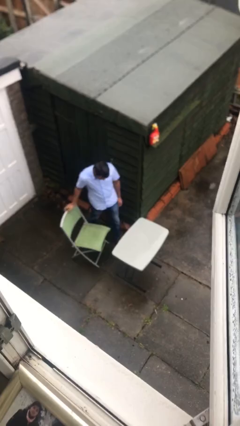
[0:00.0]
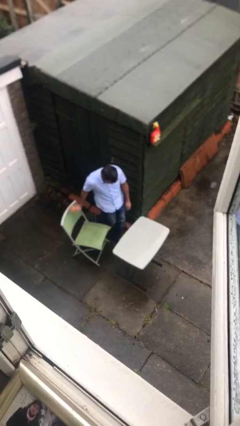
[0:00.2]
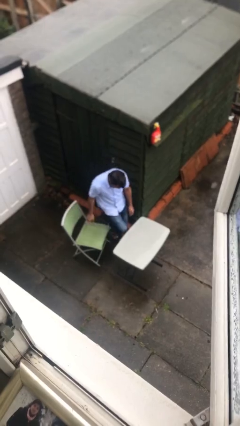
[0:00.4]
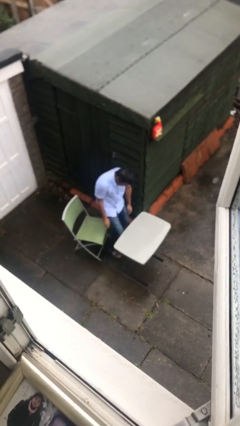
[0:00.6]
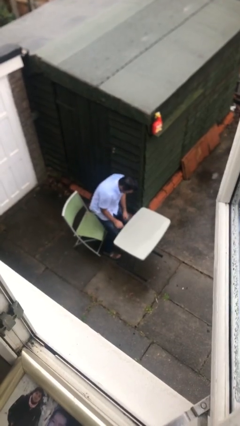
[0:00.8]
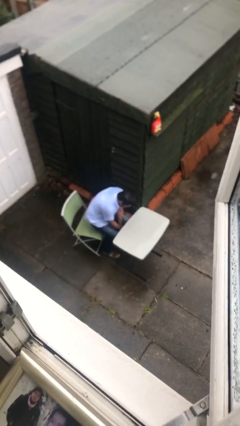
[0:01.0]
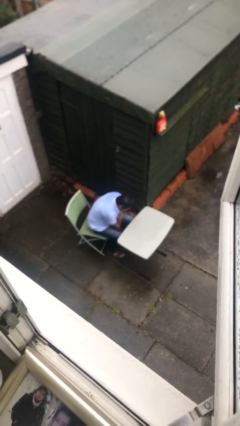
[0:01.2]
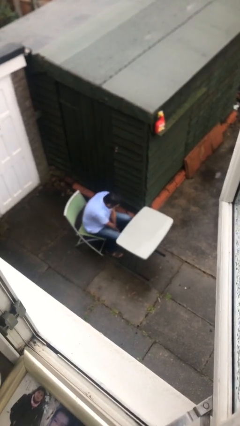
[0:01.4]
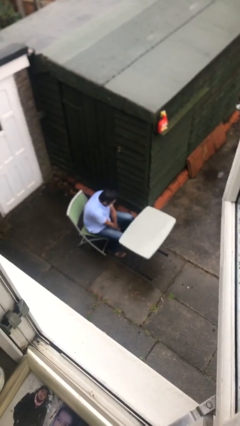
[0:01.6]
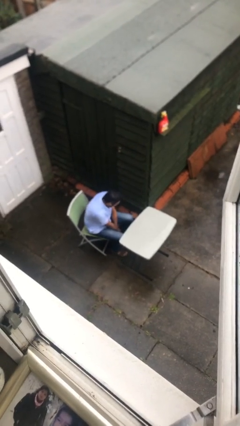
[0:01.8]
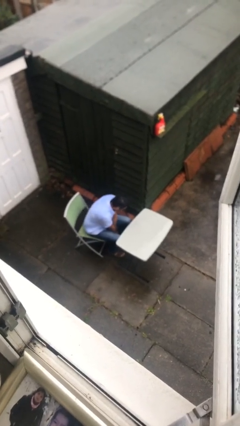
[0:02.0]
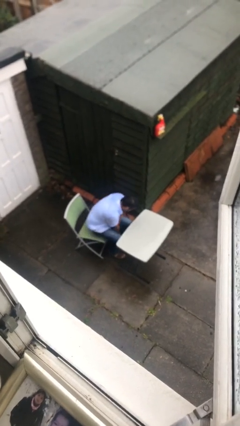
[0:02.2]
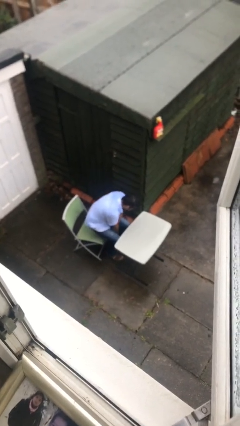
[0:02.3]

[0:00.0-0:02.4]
person sits down

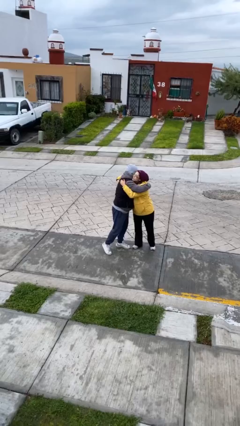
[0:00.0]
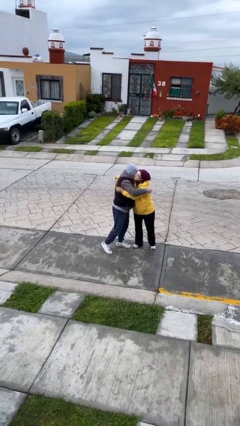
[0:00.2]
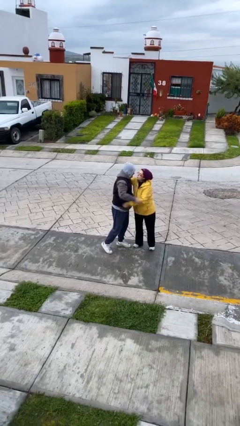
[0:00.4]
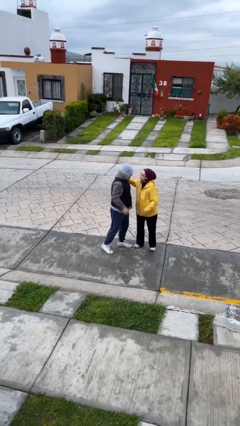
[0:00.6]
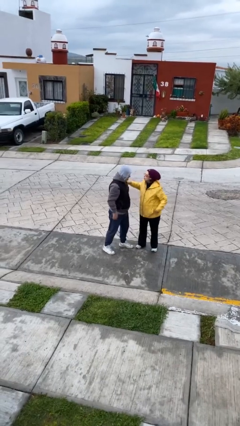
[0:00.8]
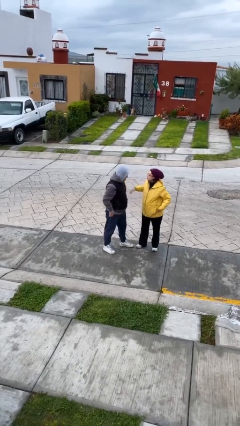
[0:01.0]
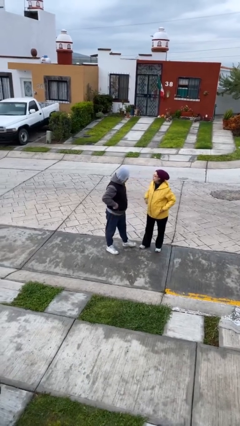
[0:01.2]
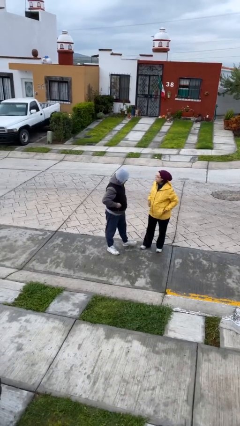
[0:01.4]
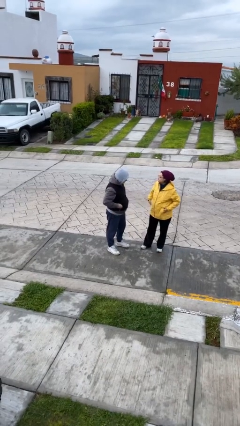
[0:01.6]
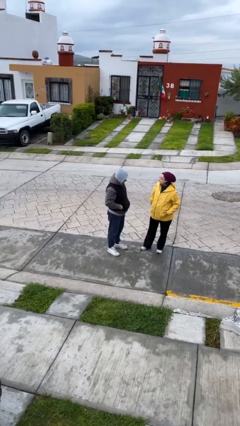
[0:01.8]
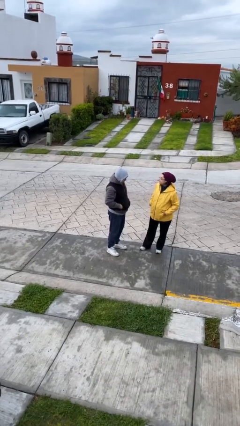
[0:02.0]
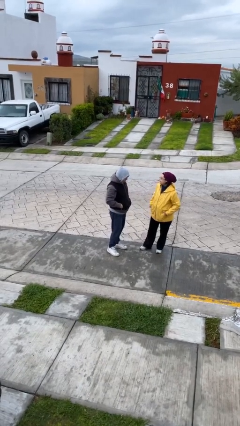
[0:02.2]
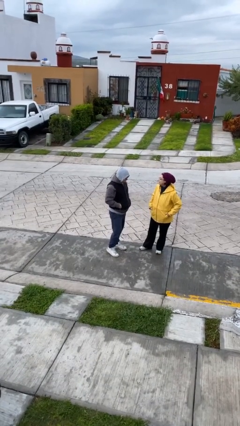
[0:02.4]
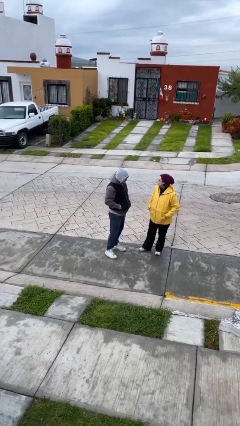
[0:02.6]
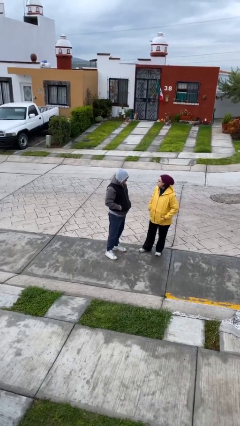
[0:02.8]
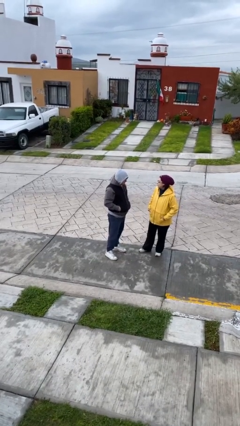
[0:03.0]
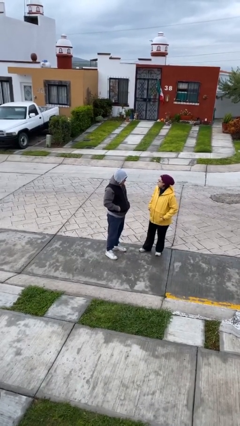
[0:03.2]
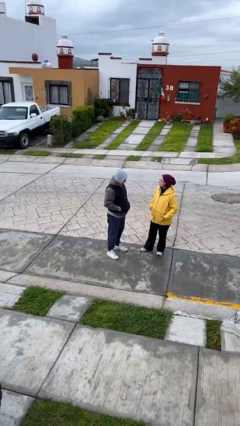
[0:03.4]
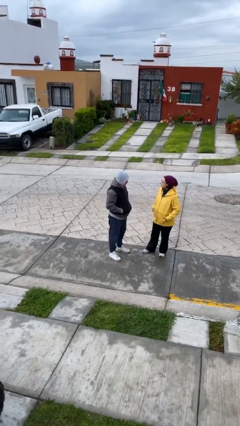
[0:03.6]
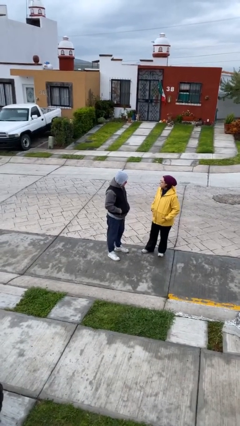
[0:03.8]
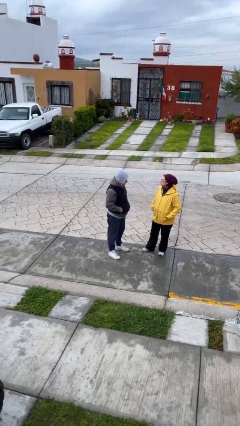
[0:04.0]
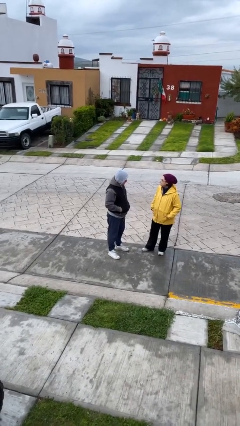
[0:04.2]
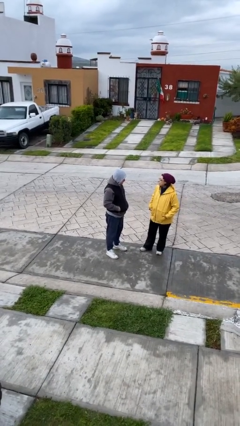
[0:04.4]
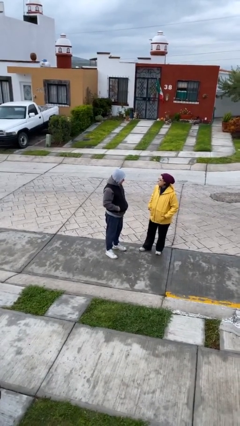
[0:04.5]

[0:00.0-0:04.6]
person talks to person

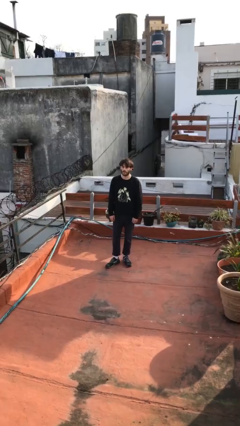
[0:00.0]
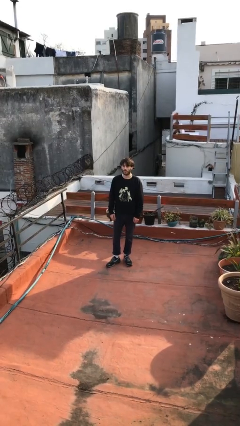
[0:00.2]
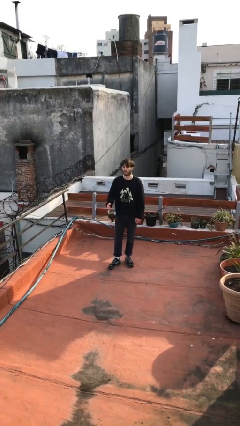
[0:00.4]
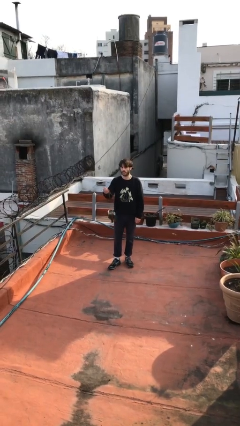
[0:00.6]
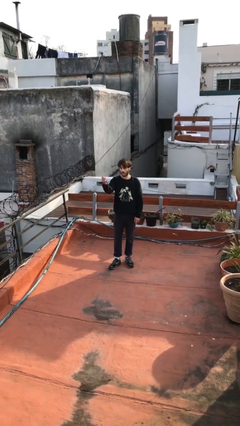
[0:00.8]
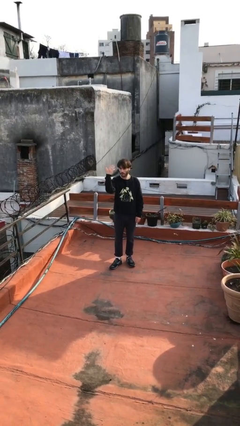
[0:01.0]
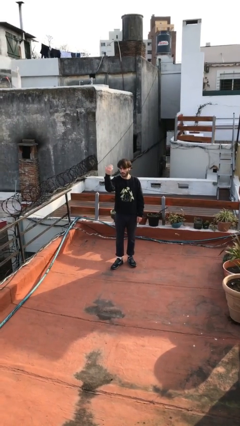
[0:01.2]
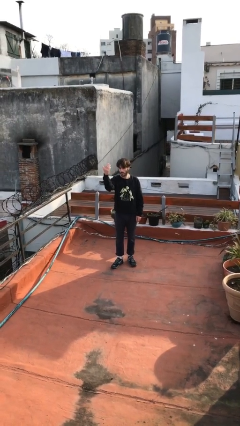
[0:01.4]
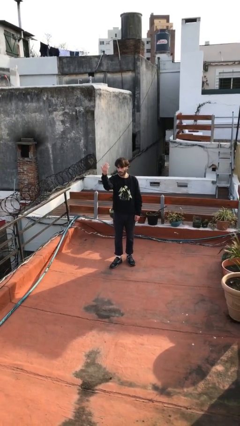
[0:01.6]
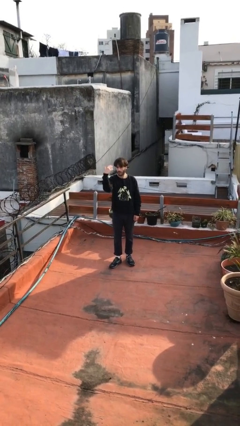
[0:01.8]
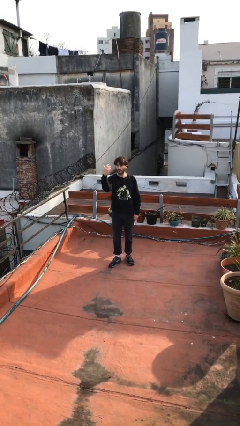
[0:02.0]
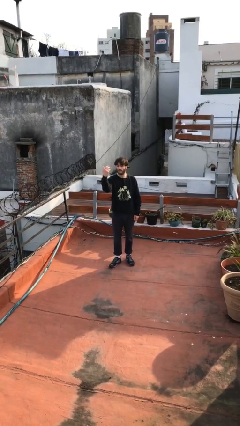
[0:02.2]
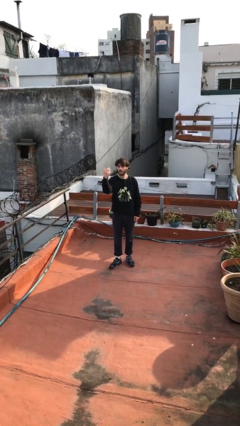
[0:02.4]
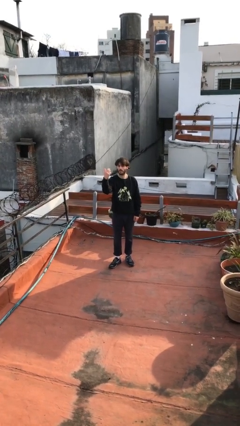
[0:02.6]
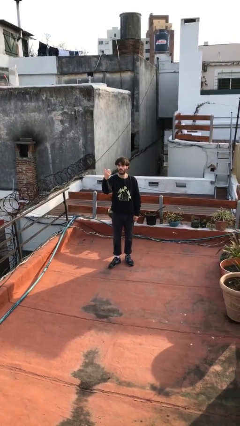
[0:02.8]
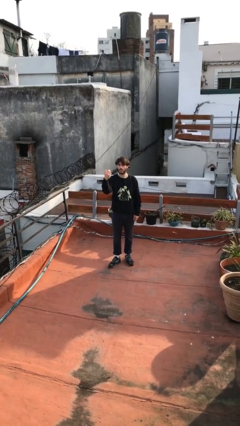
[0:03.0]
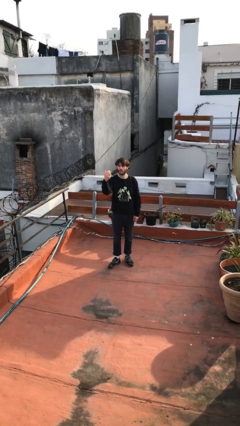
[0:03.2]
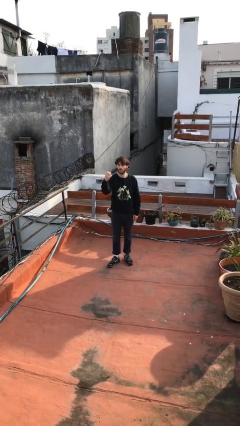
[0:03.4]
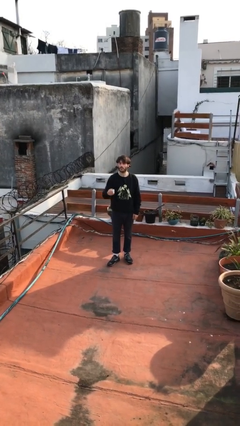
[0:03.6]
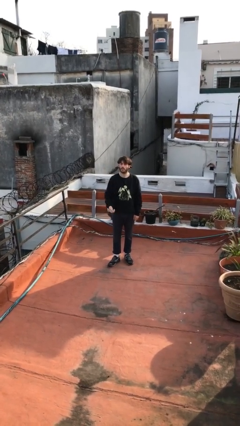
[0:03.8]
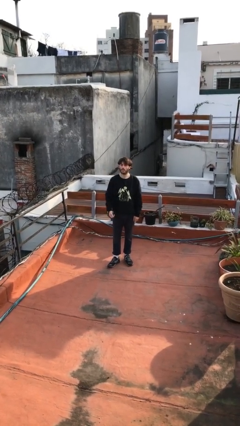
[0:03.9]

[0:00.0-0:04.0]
person gestures come here

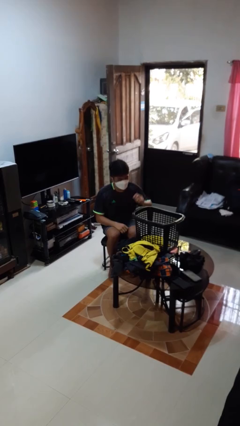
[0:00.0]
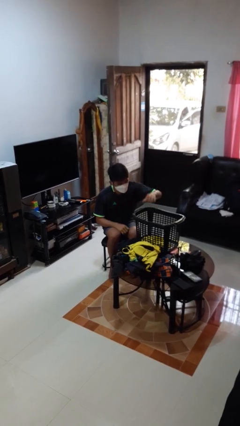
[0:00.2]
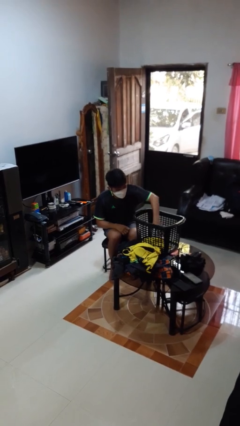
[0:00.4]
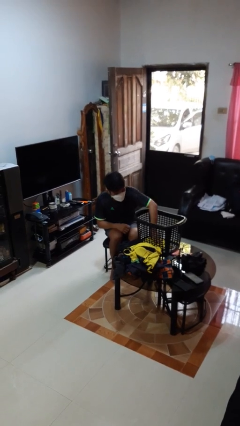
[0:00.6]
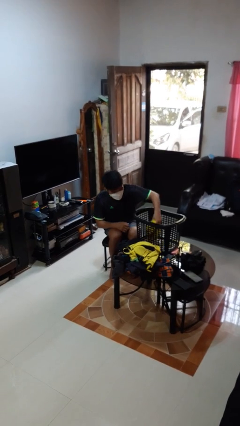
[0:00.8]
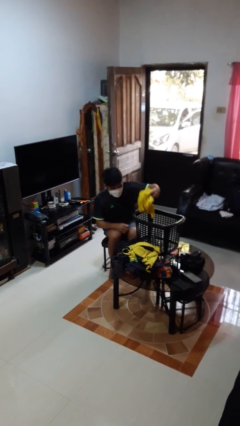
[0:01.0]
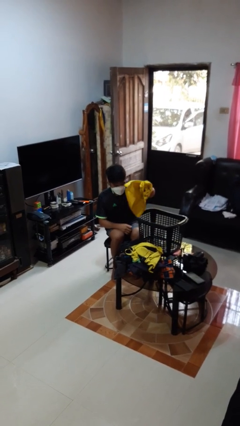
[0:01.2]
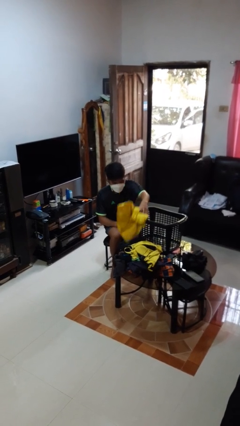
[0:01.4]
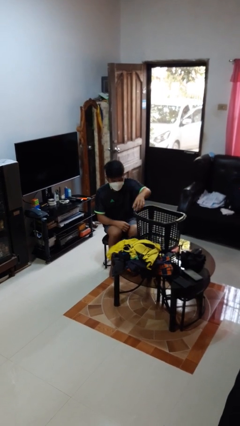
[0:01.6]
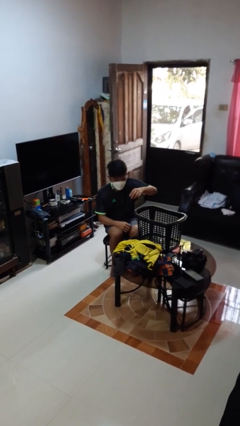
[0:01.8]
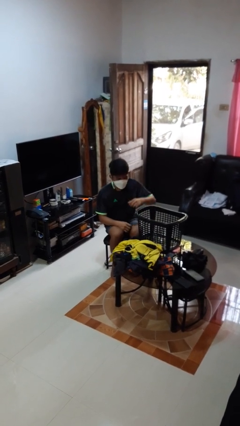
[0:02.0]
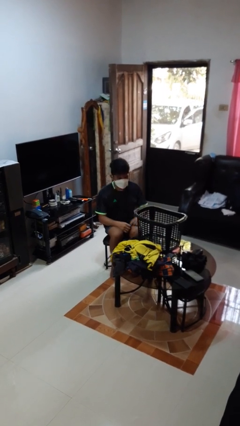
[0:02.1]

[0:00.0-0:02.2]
person takes object from basket

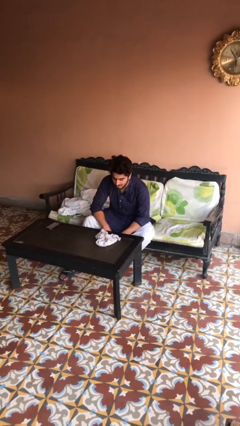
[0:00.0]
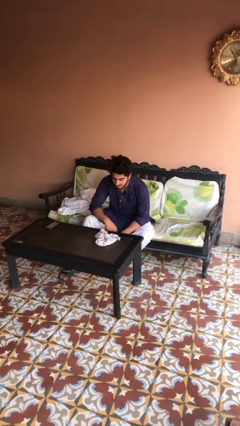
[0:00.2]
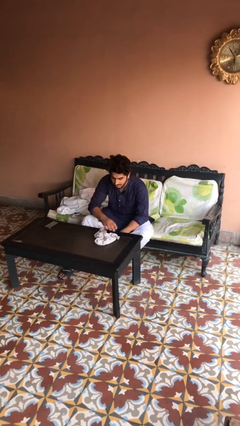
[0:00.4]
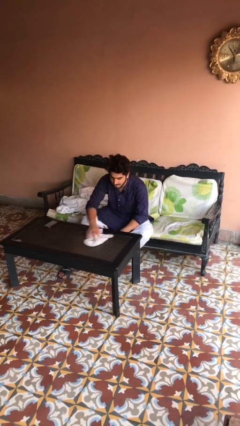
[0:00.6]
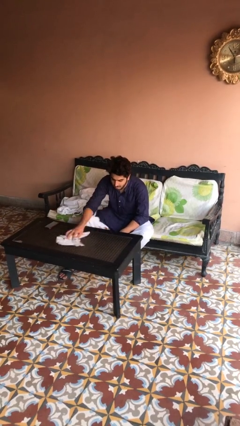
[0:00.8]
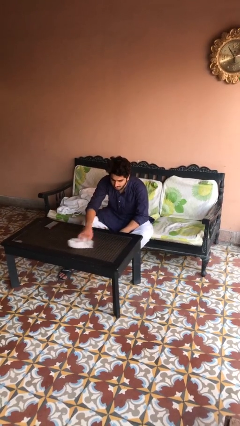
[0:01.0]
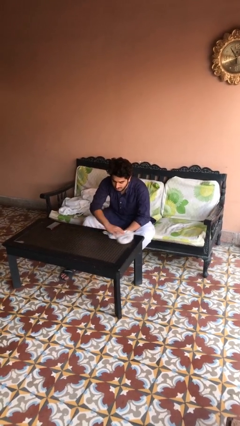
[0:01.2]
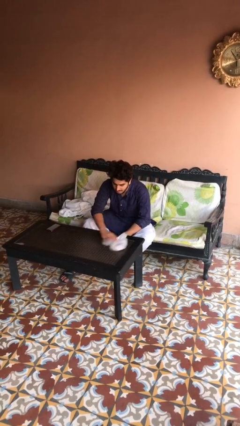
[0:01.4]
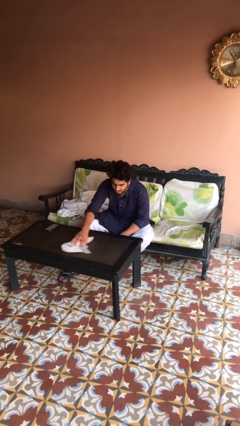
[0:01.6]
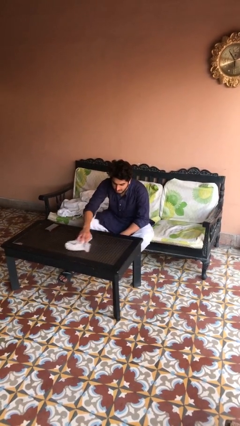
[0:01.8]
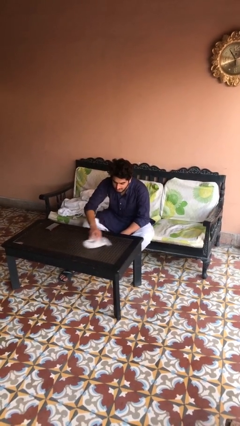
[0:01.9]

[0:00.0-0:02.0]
person cleans table with rag

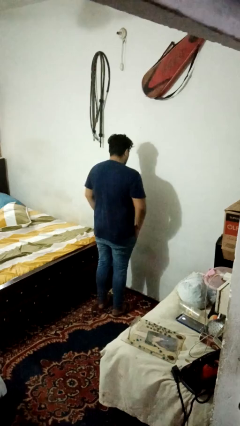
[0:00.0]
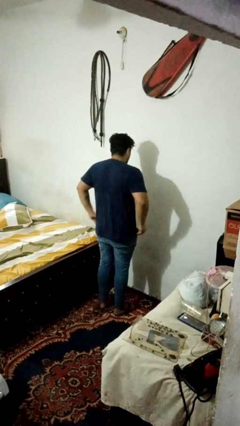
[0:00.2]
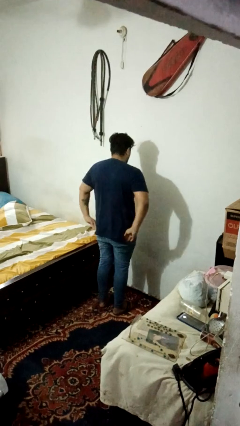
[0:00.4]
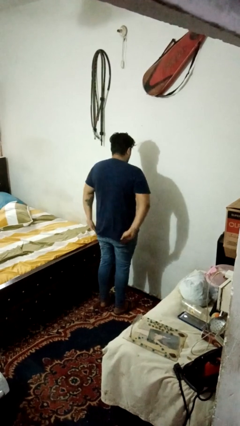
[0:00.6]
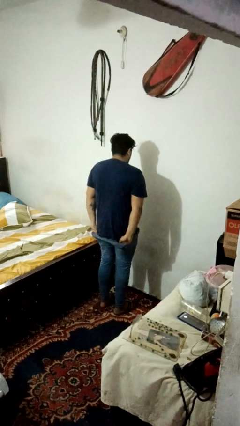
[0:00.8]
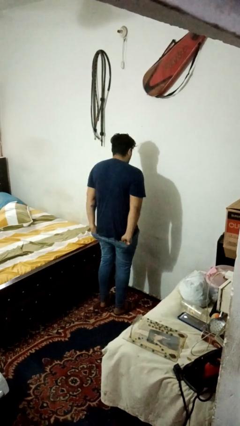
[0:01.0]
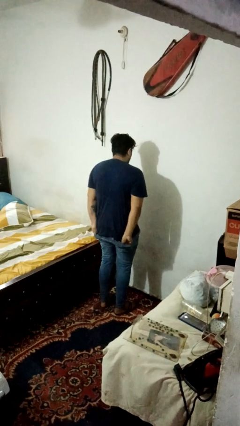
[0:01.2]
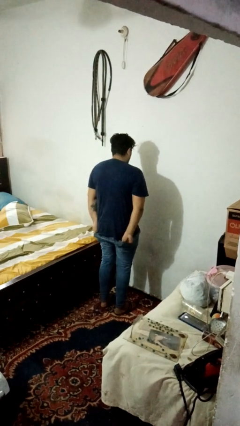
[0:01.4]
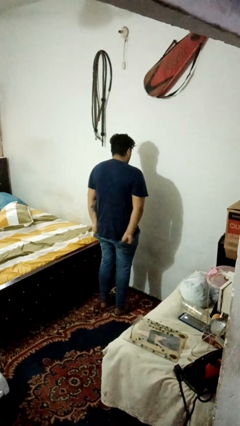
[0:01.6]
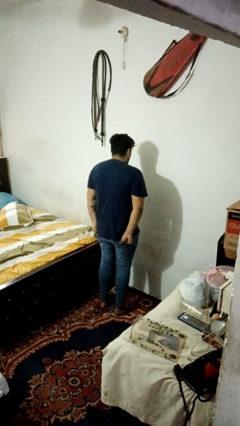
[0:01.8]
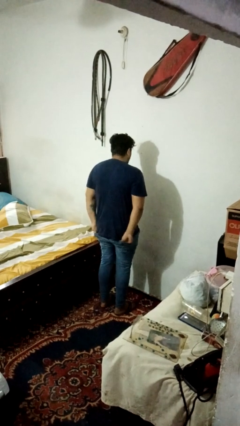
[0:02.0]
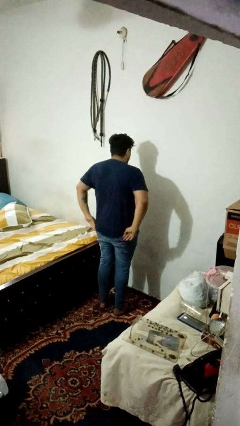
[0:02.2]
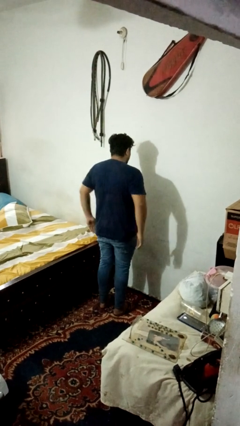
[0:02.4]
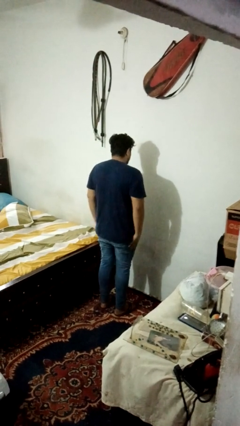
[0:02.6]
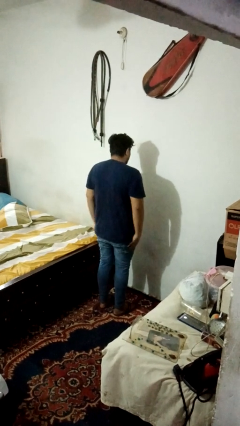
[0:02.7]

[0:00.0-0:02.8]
person puts hands in back pockets
